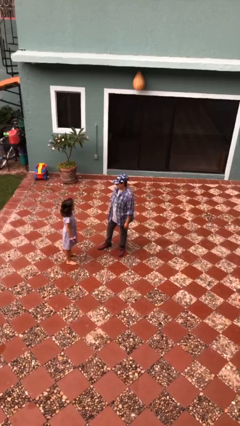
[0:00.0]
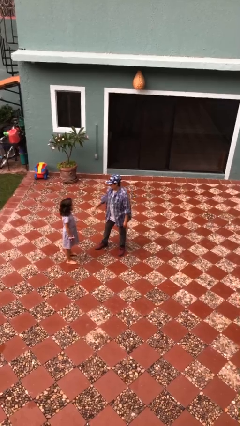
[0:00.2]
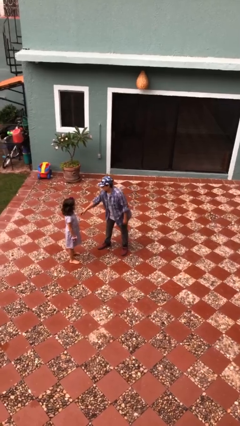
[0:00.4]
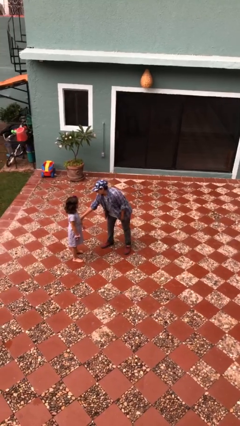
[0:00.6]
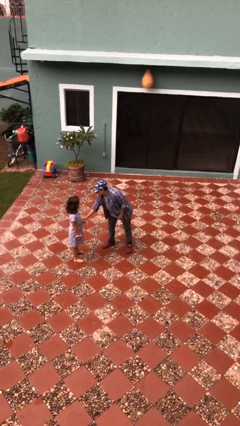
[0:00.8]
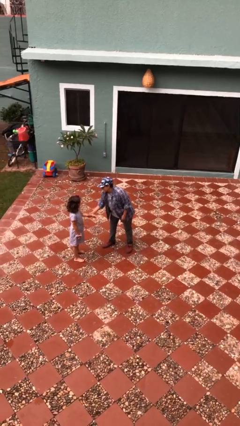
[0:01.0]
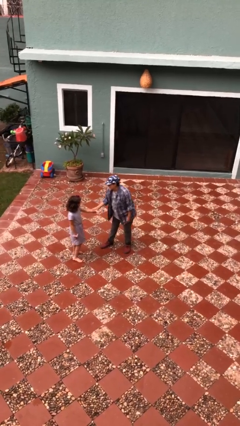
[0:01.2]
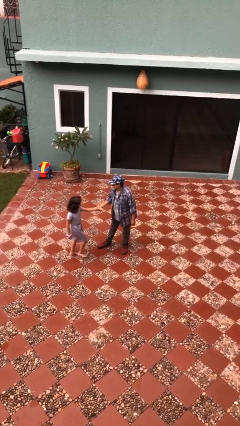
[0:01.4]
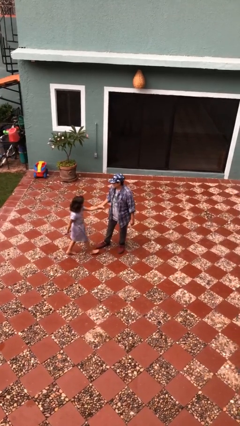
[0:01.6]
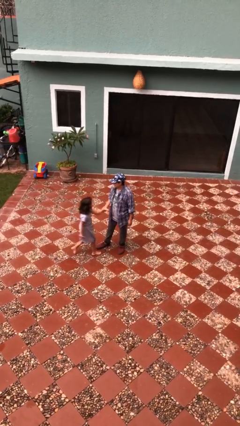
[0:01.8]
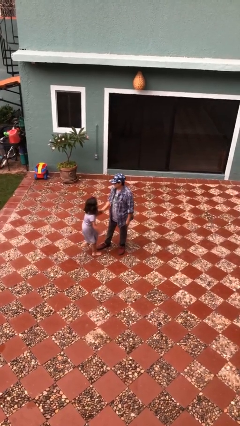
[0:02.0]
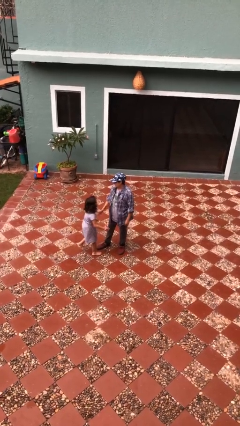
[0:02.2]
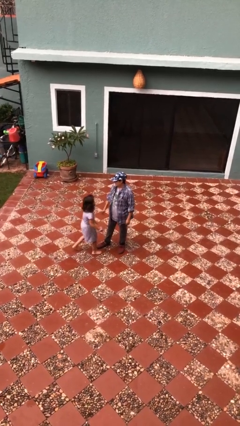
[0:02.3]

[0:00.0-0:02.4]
person grabs person by forearm

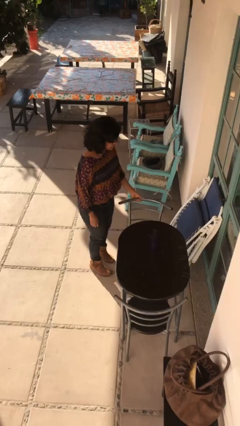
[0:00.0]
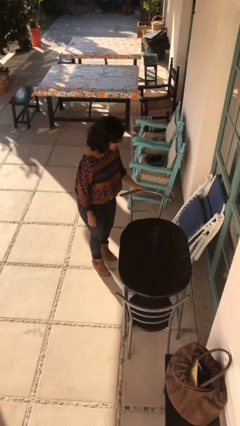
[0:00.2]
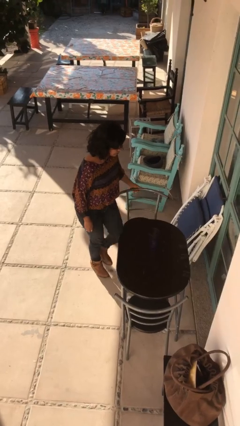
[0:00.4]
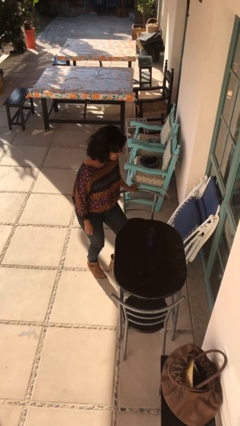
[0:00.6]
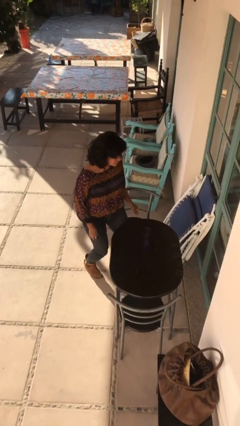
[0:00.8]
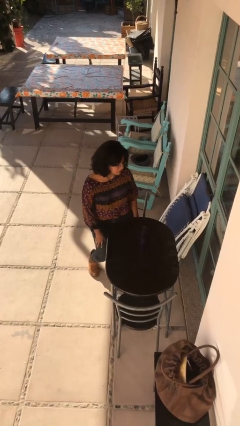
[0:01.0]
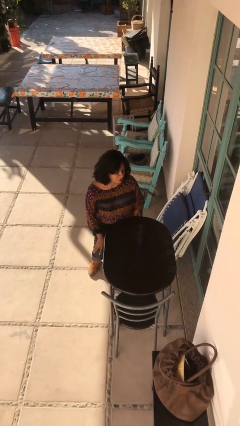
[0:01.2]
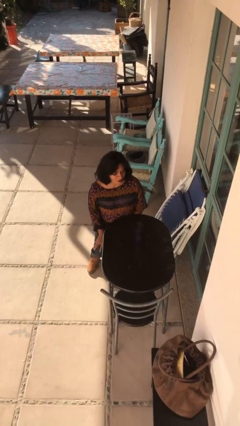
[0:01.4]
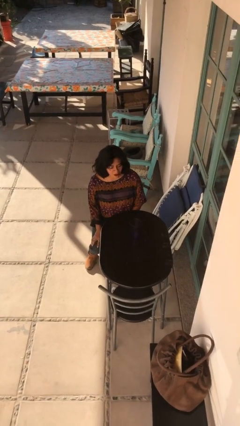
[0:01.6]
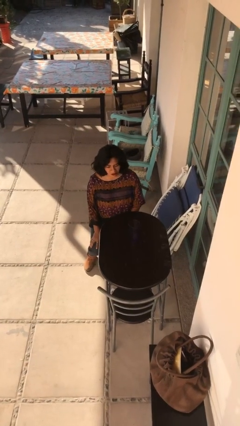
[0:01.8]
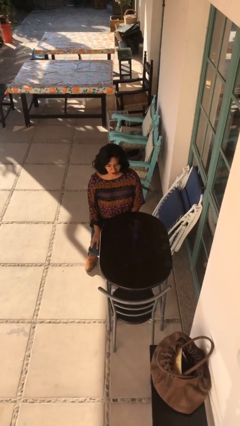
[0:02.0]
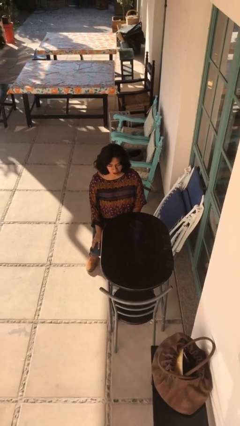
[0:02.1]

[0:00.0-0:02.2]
person sits down

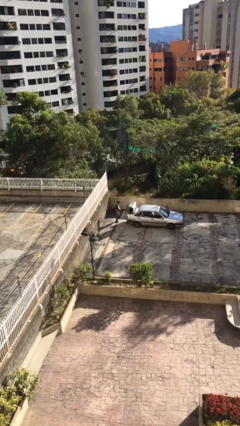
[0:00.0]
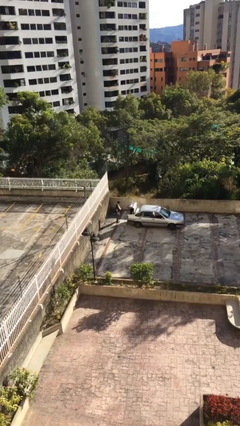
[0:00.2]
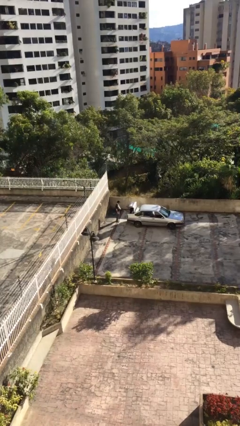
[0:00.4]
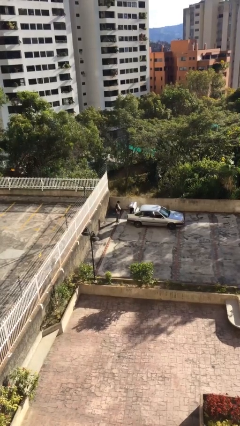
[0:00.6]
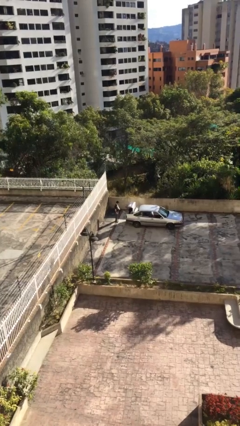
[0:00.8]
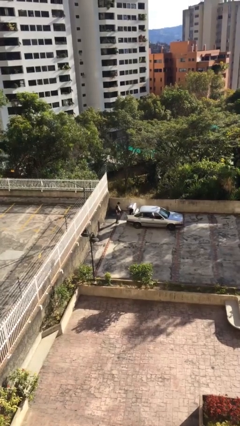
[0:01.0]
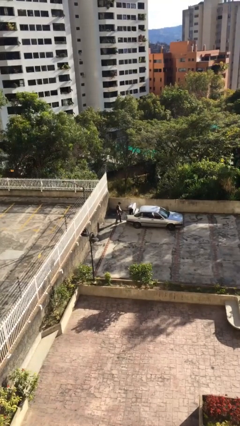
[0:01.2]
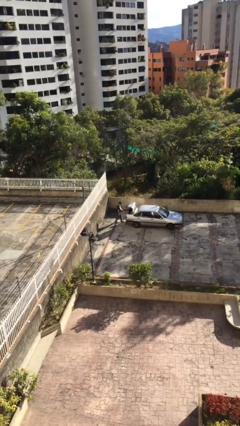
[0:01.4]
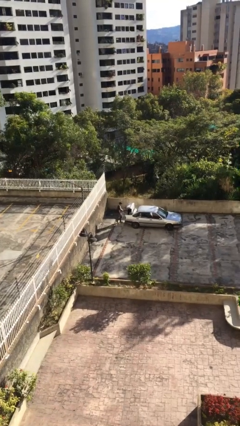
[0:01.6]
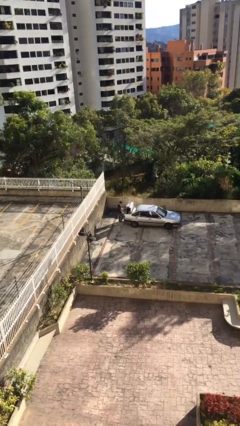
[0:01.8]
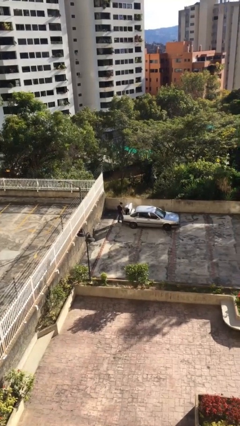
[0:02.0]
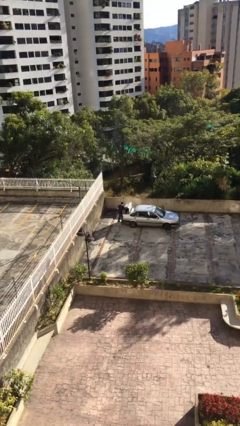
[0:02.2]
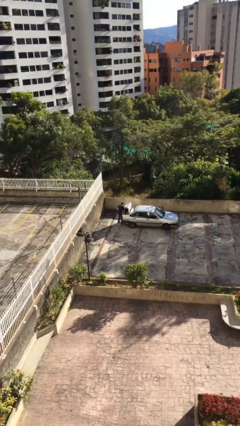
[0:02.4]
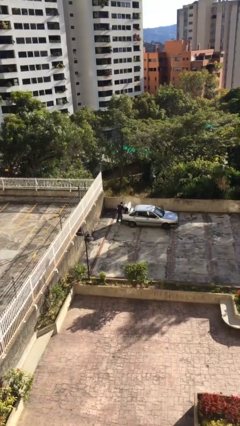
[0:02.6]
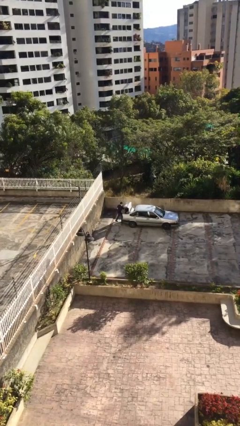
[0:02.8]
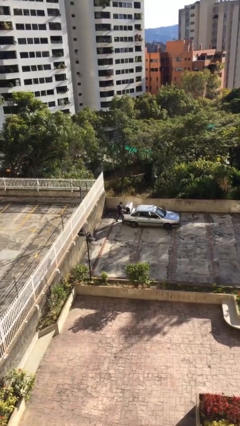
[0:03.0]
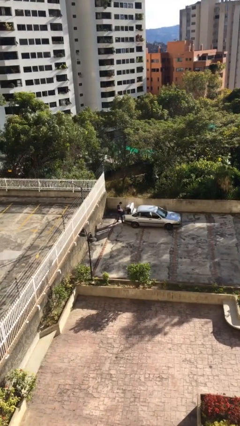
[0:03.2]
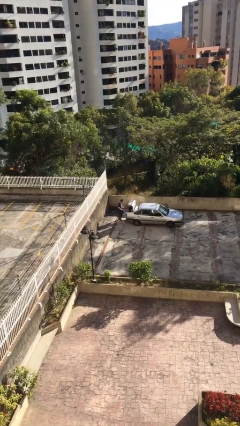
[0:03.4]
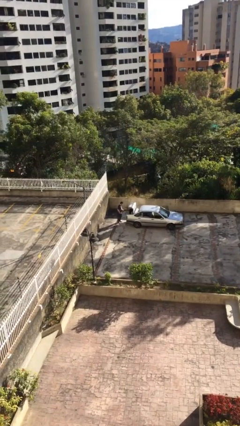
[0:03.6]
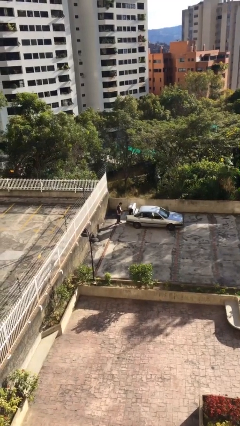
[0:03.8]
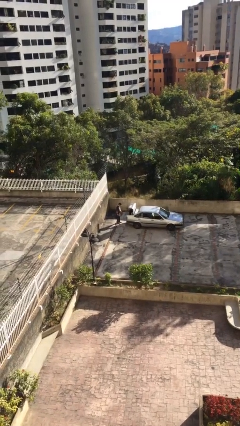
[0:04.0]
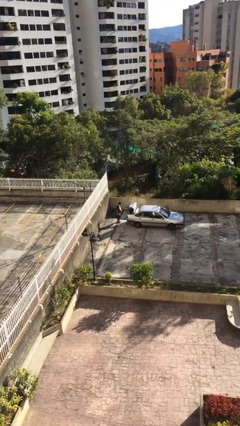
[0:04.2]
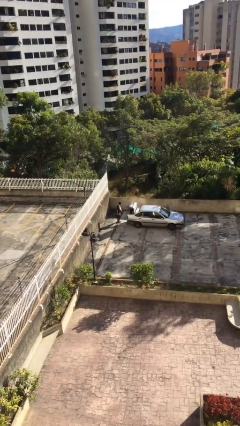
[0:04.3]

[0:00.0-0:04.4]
person unloads car

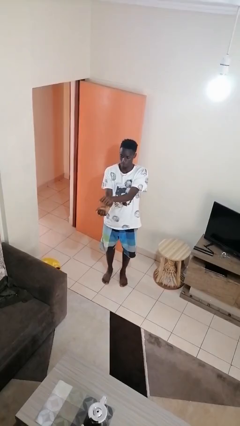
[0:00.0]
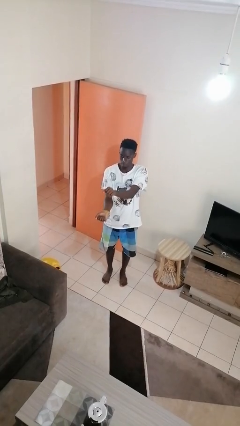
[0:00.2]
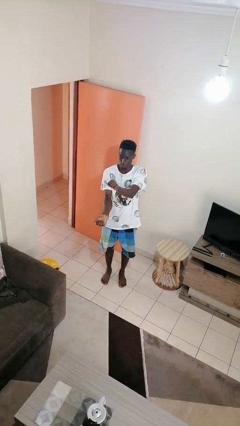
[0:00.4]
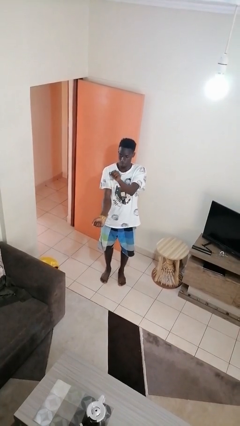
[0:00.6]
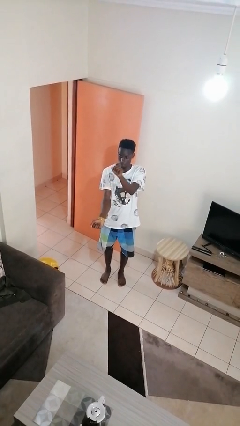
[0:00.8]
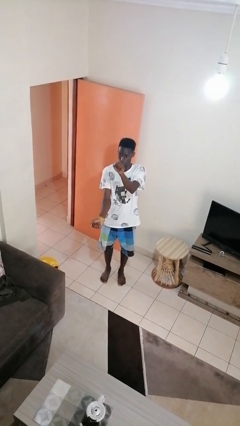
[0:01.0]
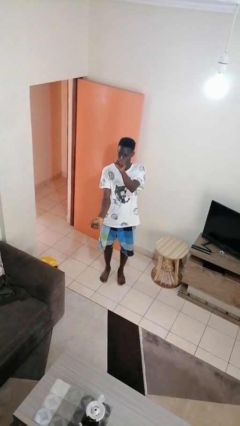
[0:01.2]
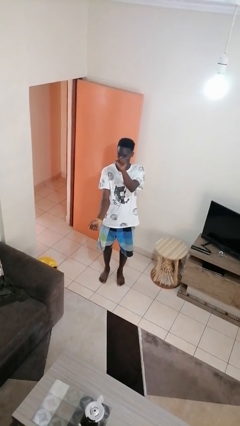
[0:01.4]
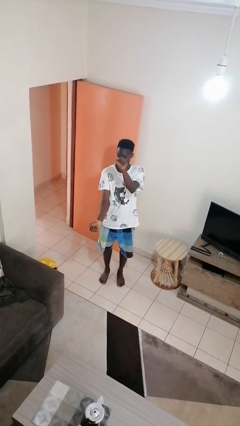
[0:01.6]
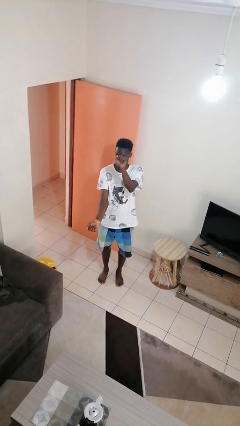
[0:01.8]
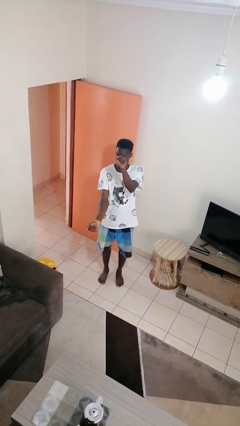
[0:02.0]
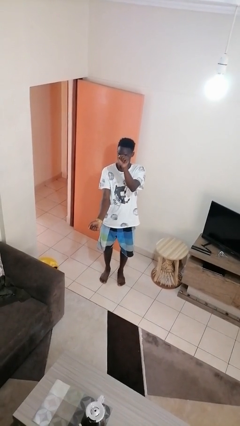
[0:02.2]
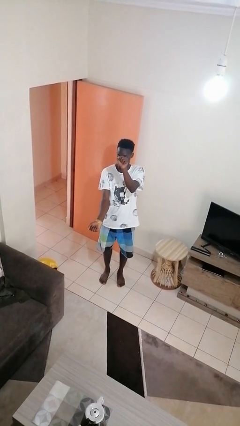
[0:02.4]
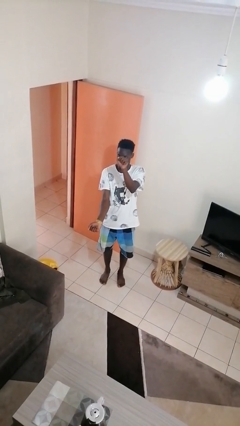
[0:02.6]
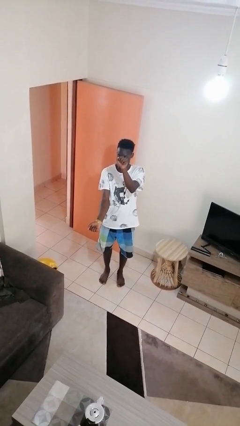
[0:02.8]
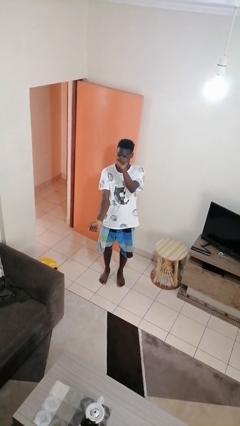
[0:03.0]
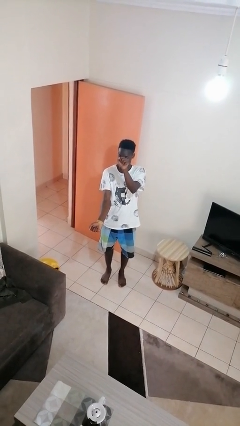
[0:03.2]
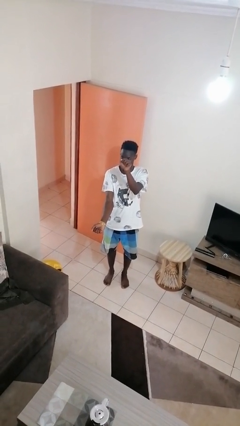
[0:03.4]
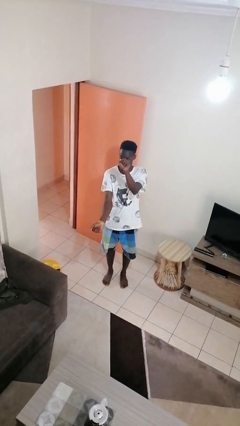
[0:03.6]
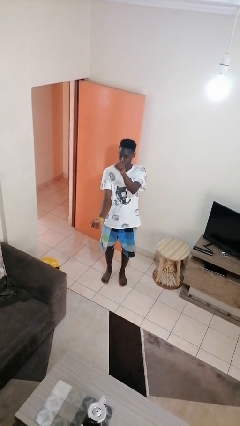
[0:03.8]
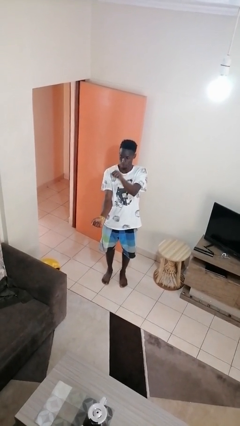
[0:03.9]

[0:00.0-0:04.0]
person gestures zoom in

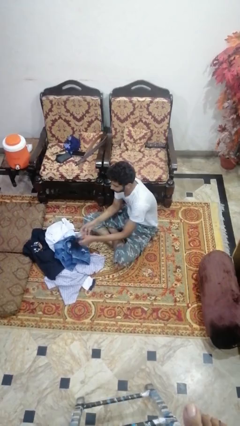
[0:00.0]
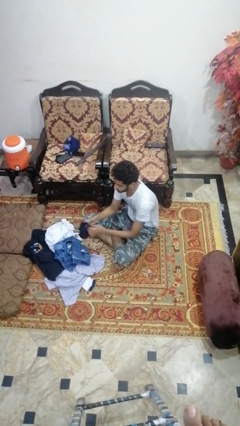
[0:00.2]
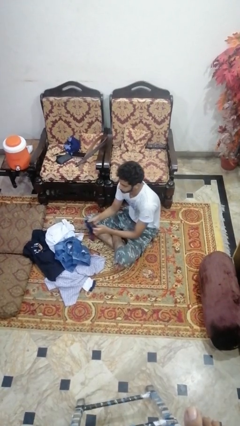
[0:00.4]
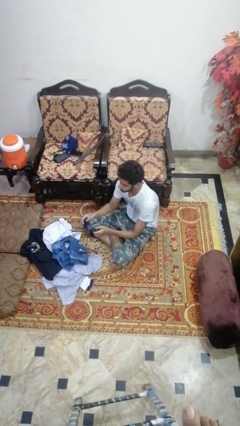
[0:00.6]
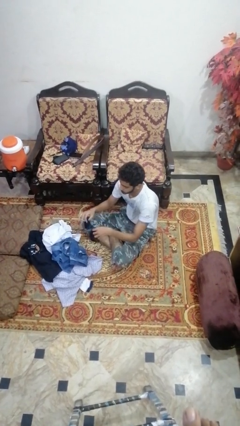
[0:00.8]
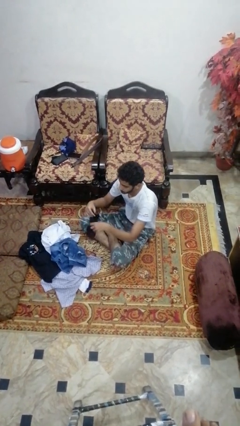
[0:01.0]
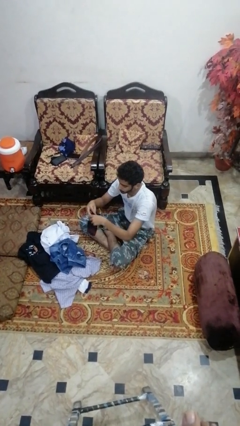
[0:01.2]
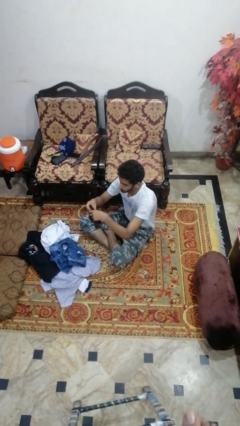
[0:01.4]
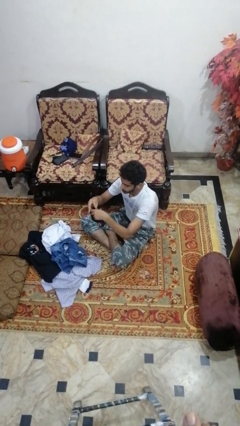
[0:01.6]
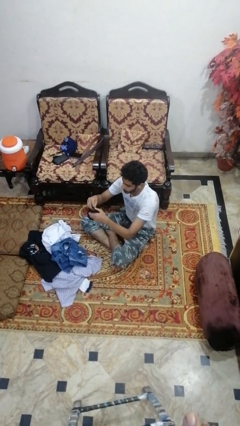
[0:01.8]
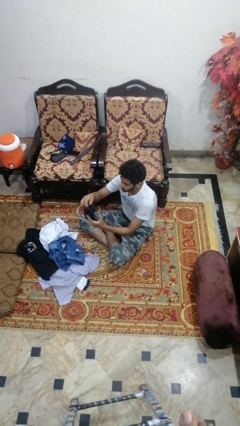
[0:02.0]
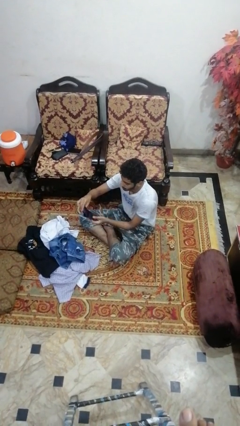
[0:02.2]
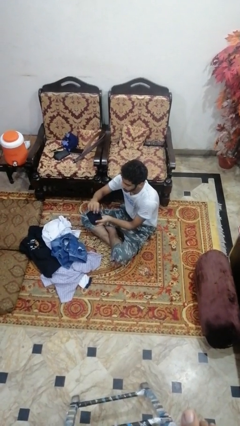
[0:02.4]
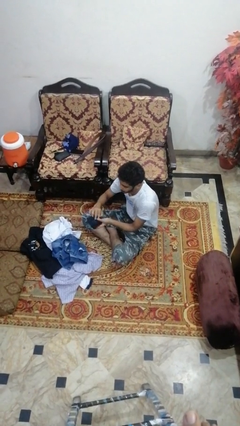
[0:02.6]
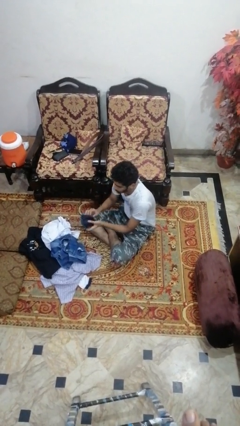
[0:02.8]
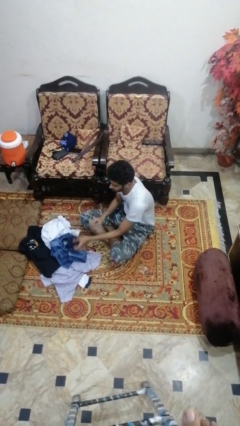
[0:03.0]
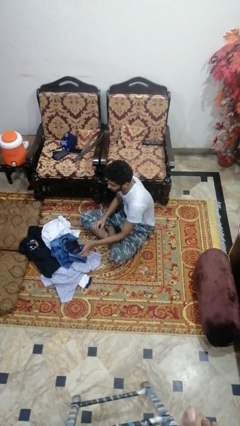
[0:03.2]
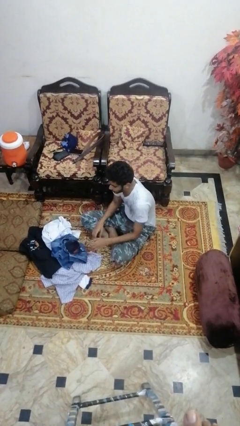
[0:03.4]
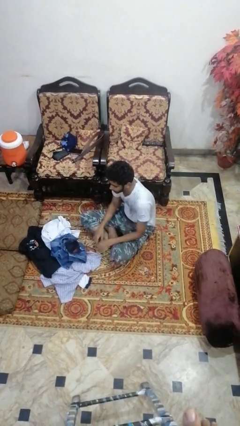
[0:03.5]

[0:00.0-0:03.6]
person folds socks

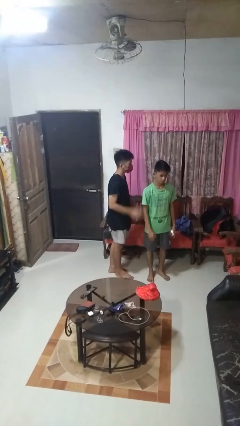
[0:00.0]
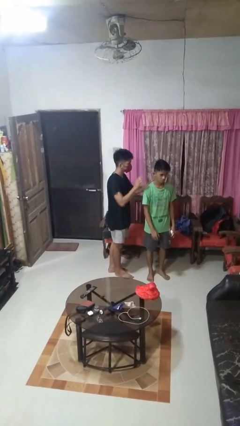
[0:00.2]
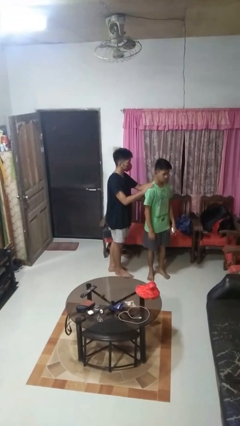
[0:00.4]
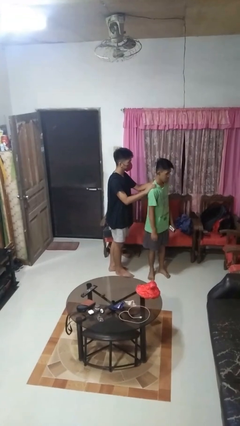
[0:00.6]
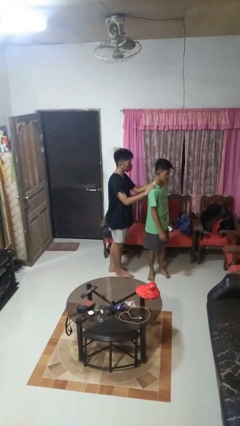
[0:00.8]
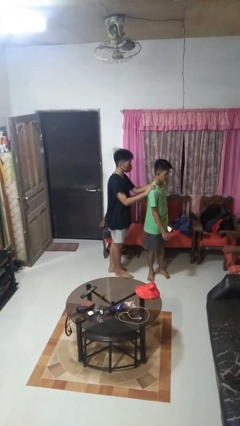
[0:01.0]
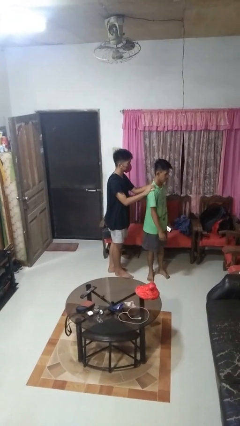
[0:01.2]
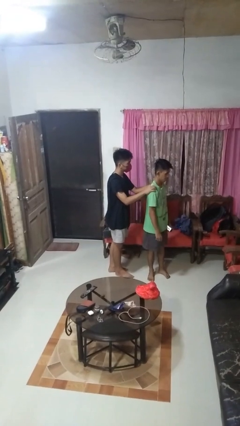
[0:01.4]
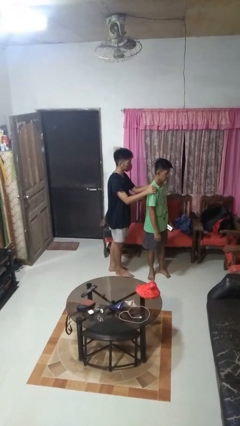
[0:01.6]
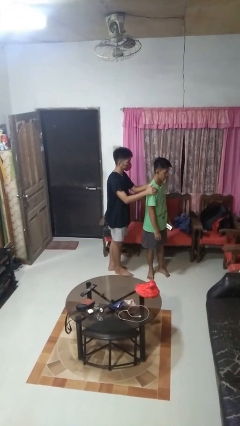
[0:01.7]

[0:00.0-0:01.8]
person grabs person by shoulder
